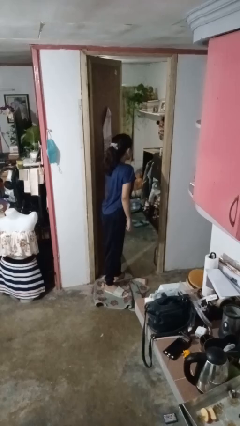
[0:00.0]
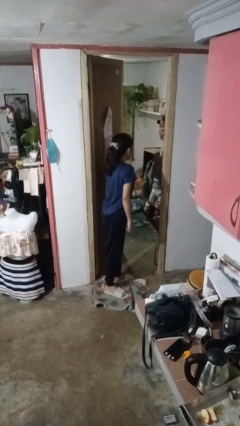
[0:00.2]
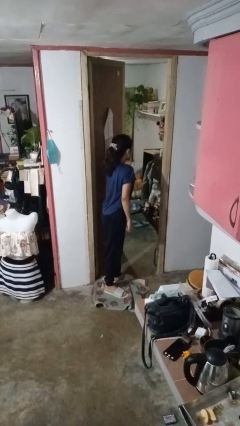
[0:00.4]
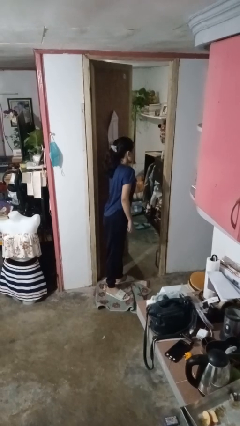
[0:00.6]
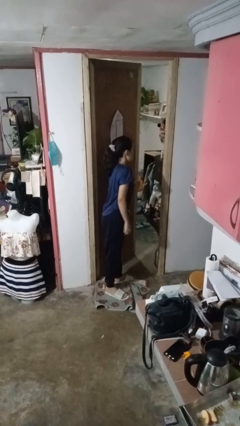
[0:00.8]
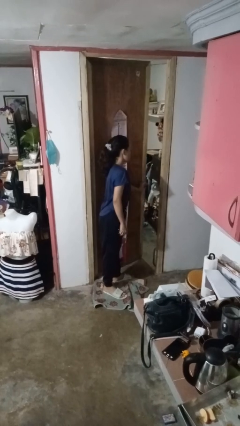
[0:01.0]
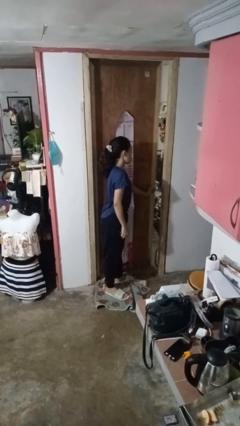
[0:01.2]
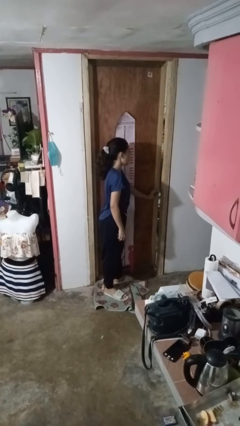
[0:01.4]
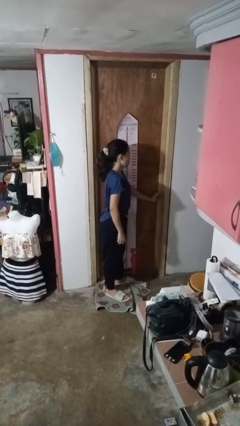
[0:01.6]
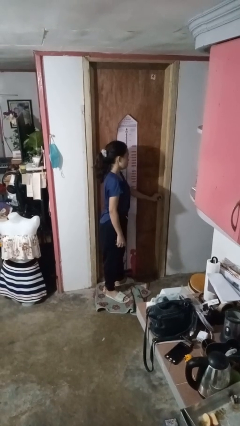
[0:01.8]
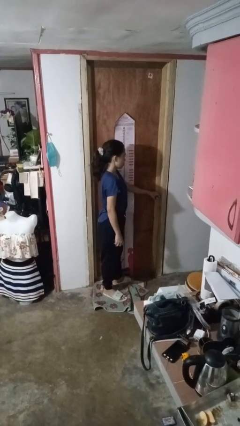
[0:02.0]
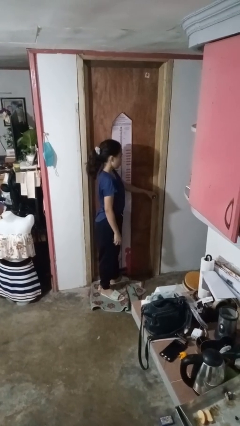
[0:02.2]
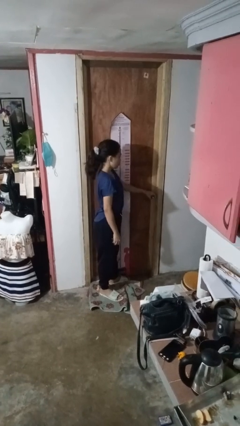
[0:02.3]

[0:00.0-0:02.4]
person closes facility door

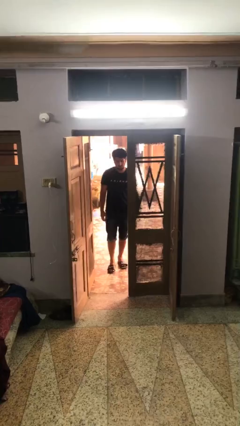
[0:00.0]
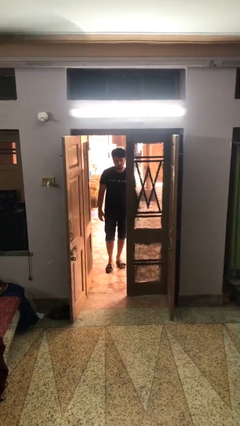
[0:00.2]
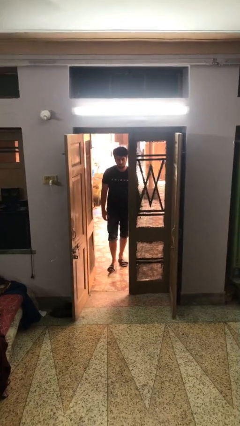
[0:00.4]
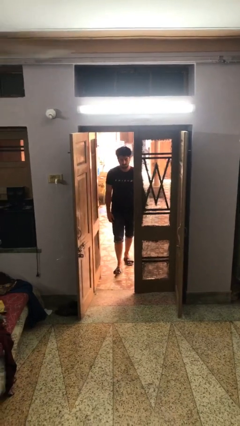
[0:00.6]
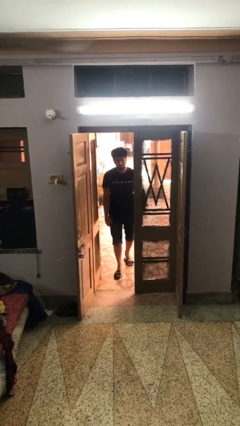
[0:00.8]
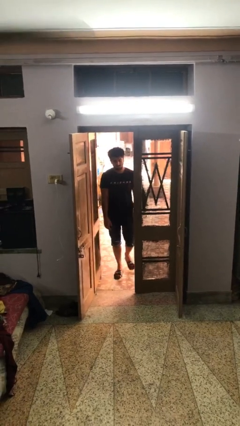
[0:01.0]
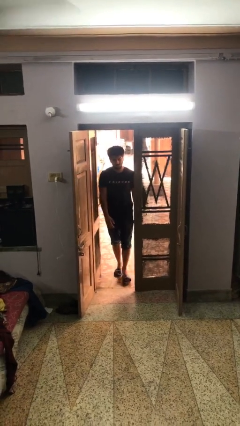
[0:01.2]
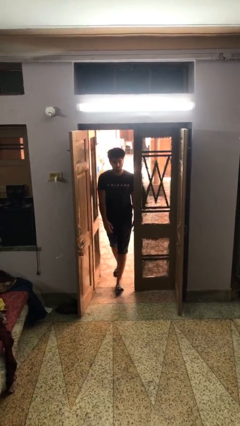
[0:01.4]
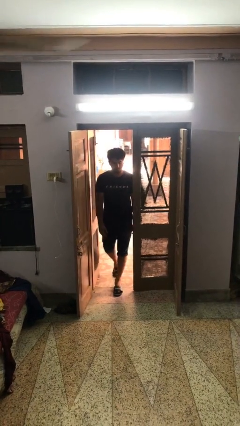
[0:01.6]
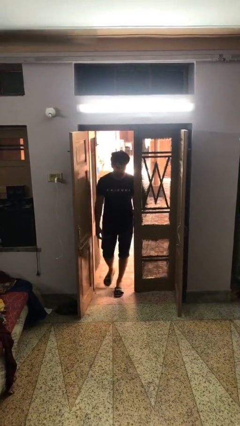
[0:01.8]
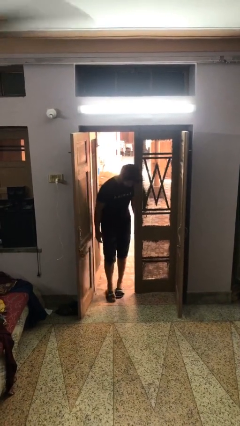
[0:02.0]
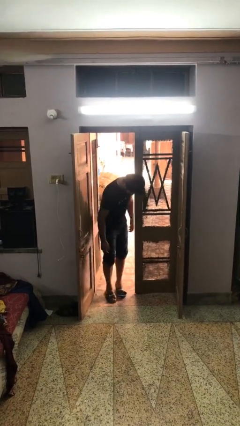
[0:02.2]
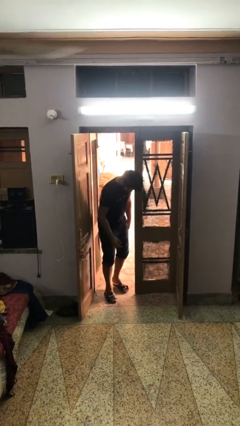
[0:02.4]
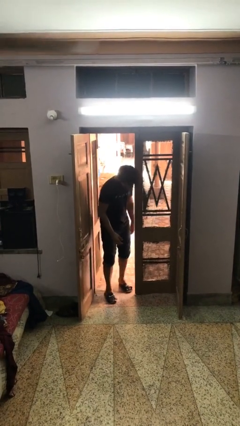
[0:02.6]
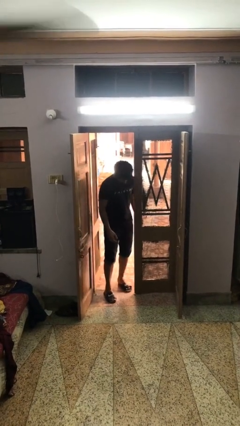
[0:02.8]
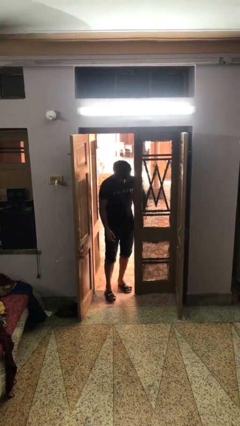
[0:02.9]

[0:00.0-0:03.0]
person bumps into wall

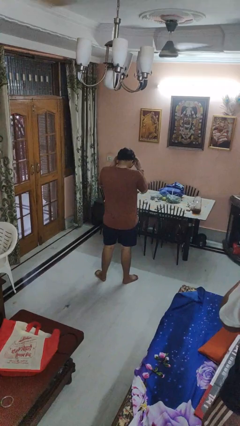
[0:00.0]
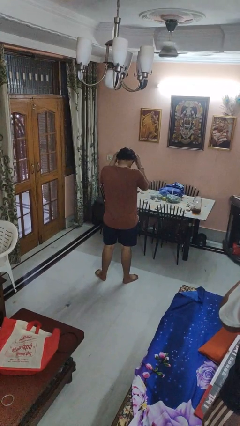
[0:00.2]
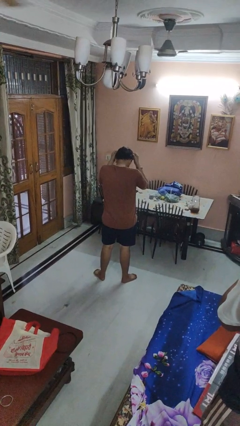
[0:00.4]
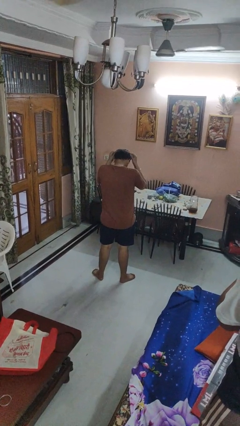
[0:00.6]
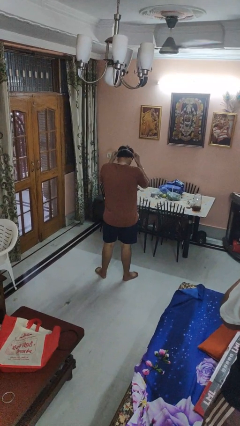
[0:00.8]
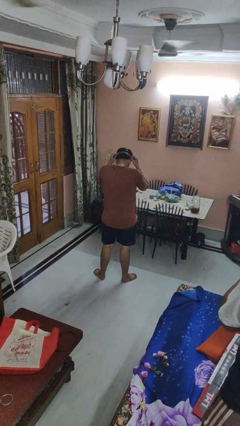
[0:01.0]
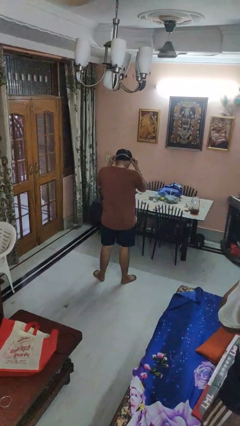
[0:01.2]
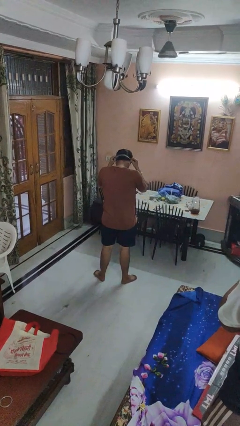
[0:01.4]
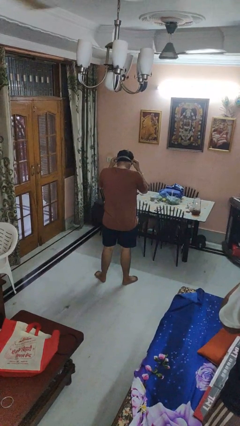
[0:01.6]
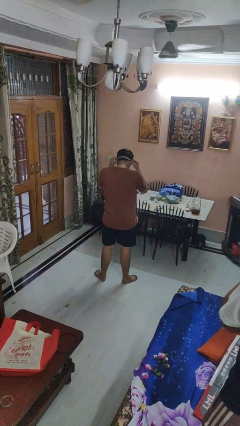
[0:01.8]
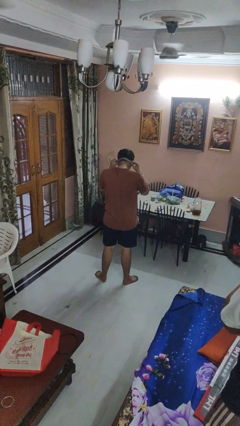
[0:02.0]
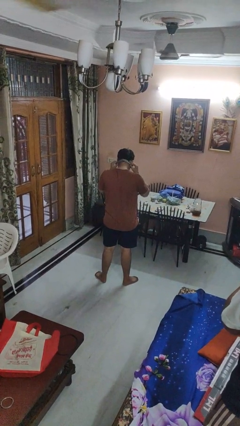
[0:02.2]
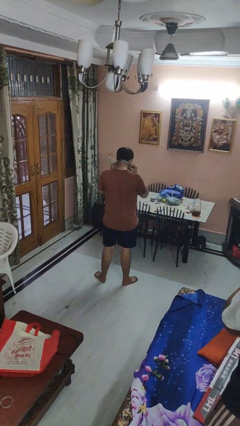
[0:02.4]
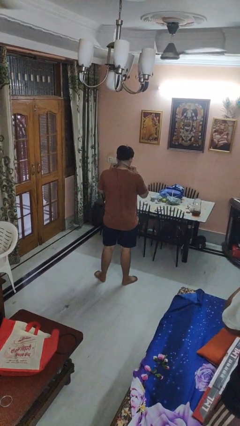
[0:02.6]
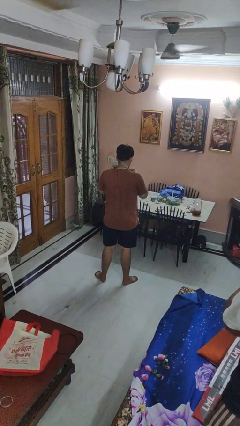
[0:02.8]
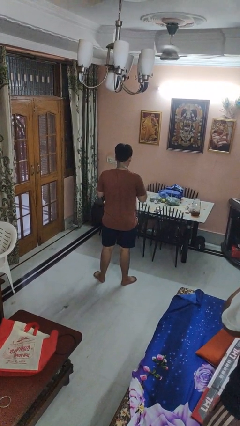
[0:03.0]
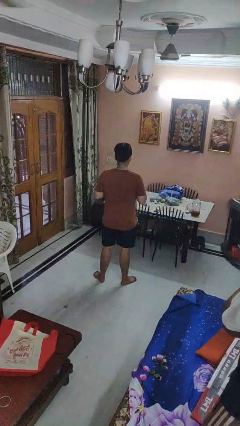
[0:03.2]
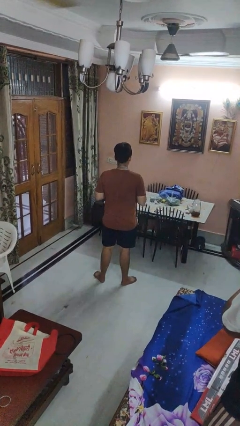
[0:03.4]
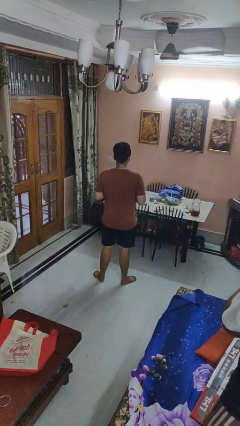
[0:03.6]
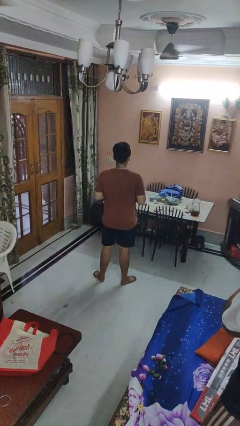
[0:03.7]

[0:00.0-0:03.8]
person puts on necktie

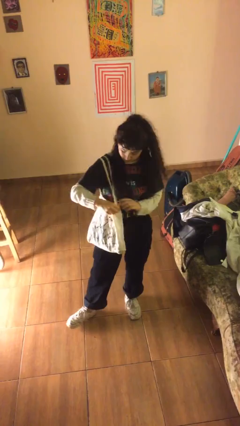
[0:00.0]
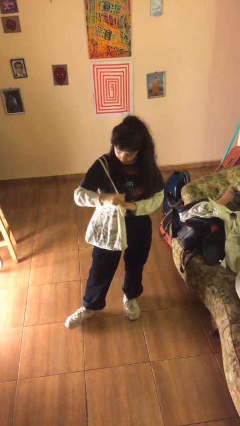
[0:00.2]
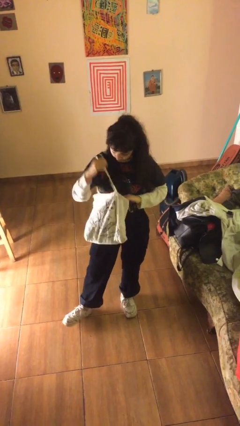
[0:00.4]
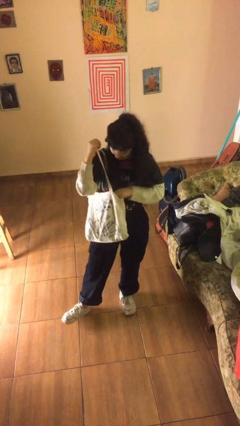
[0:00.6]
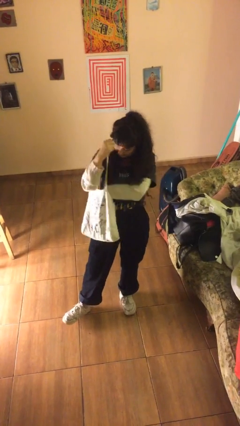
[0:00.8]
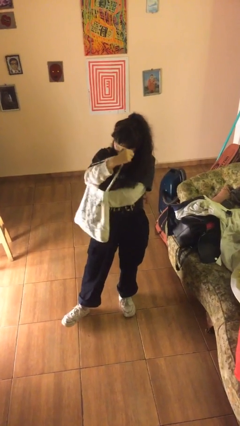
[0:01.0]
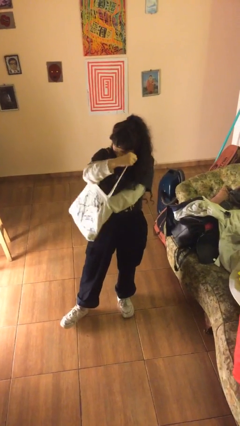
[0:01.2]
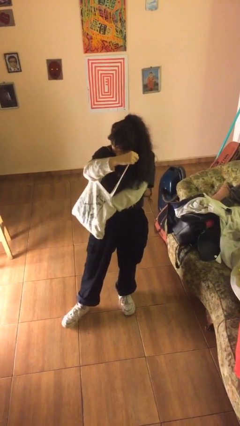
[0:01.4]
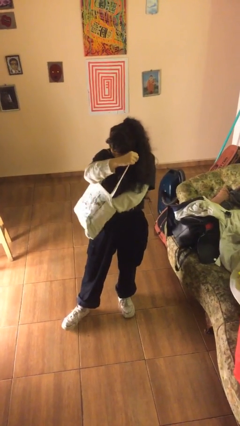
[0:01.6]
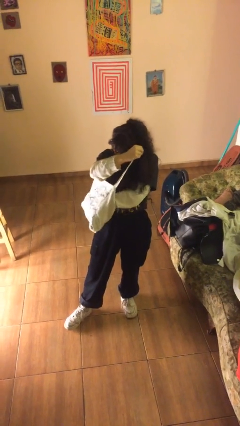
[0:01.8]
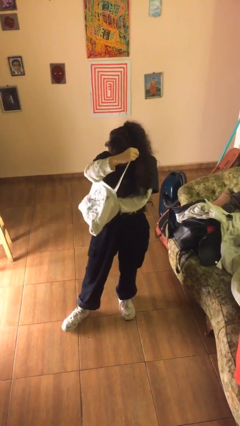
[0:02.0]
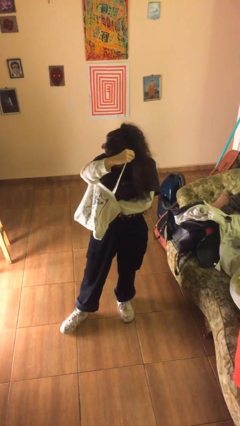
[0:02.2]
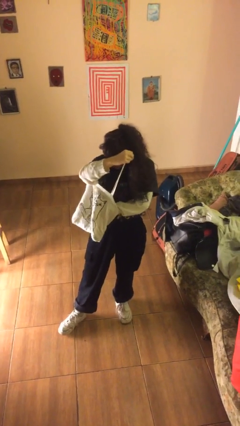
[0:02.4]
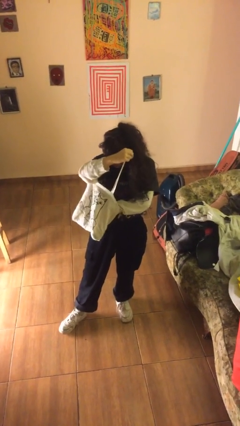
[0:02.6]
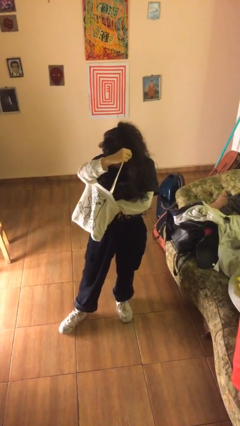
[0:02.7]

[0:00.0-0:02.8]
person searches in purse

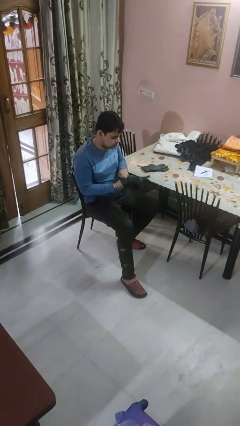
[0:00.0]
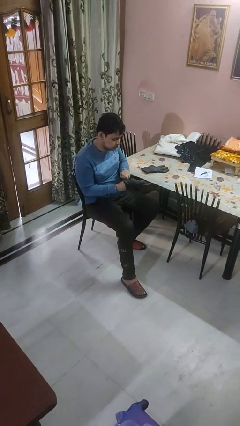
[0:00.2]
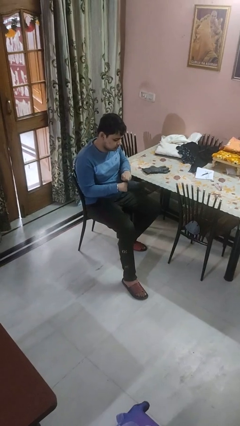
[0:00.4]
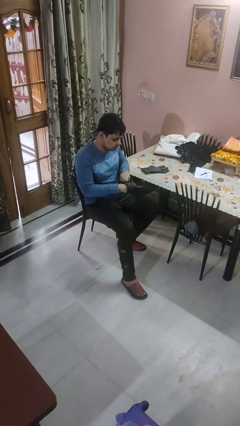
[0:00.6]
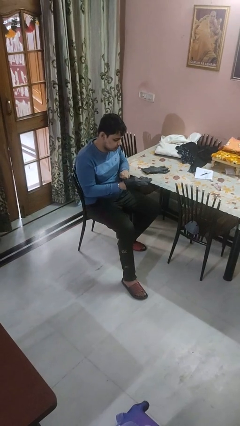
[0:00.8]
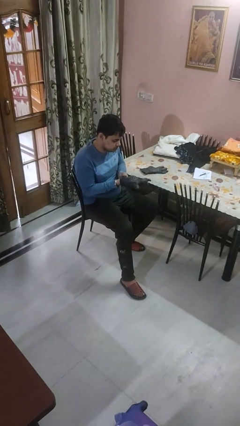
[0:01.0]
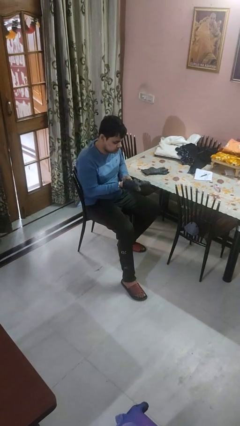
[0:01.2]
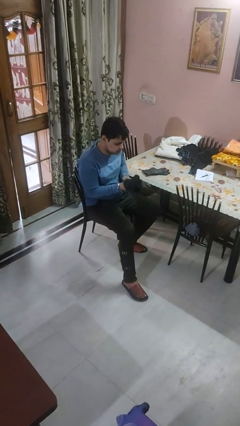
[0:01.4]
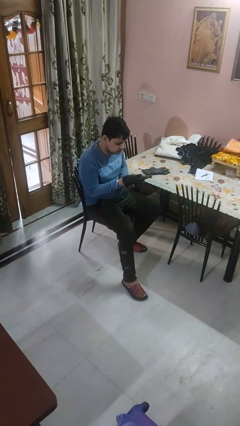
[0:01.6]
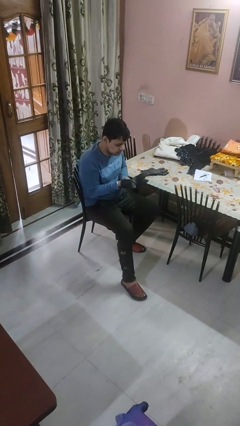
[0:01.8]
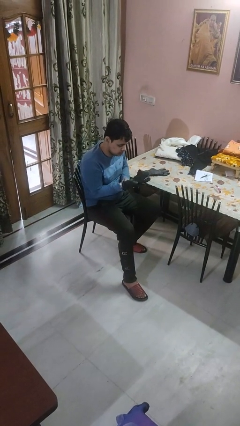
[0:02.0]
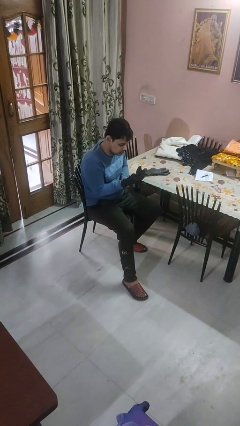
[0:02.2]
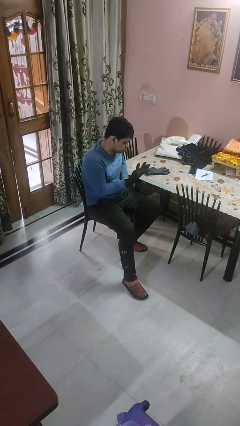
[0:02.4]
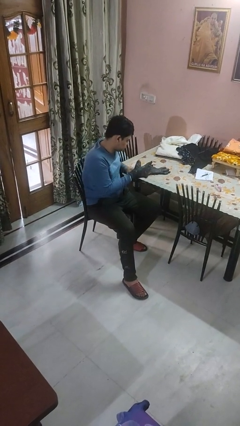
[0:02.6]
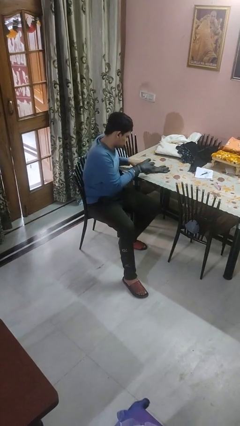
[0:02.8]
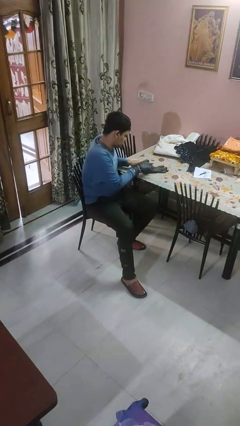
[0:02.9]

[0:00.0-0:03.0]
person puts on gloves

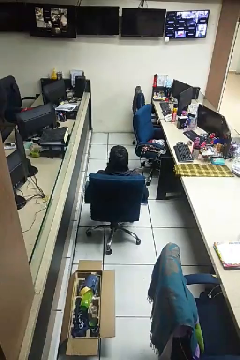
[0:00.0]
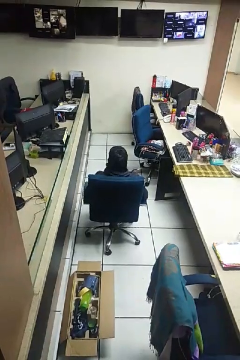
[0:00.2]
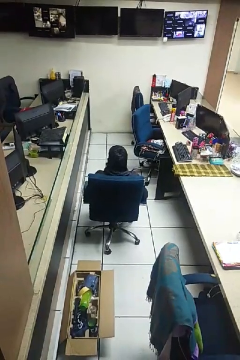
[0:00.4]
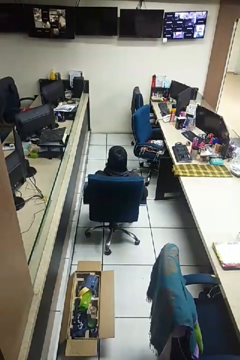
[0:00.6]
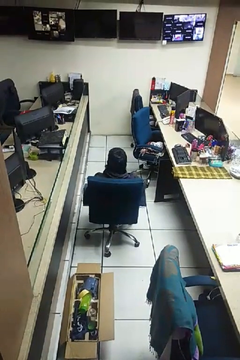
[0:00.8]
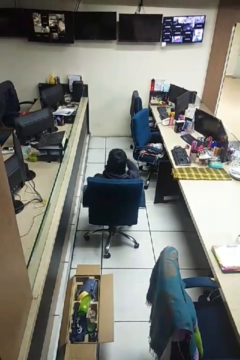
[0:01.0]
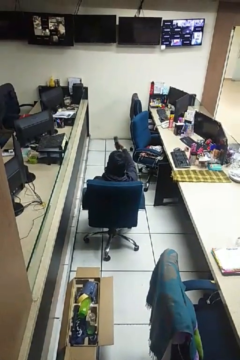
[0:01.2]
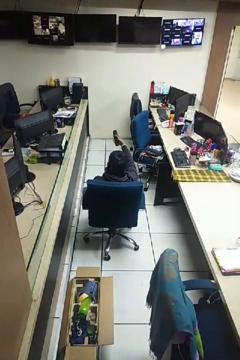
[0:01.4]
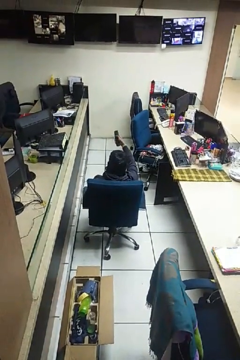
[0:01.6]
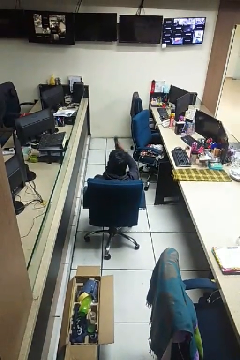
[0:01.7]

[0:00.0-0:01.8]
person uses television remote

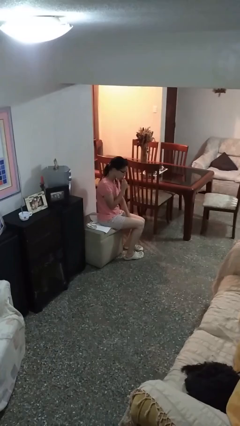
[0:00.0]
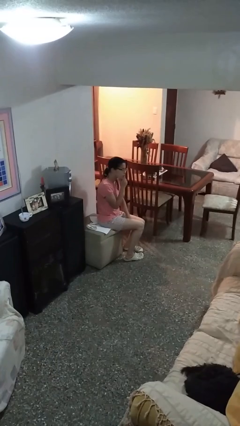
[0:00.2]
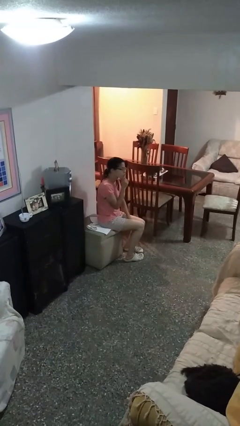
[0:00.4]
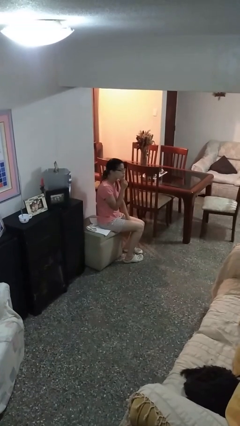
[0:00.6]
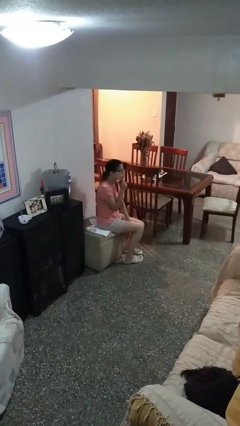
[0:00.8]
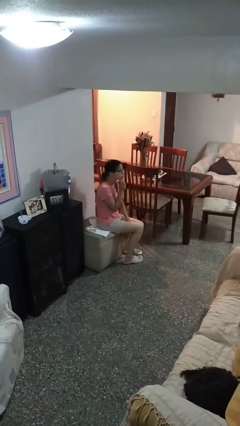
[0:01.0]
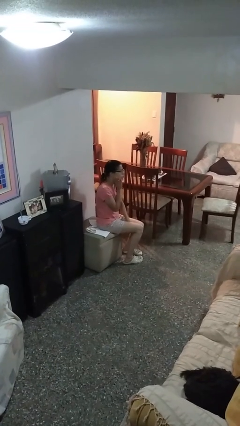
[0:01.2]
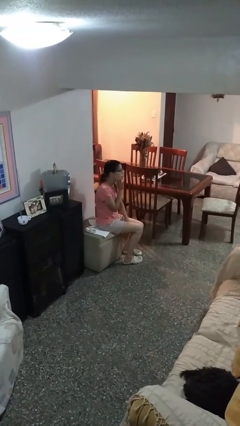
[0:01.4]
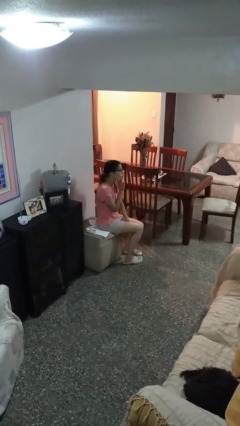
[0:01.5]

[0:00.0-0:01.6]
person strokes chin
